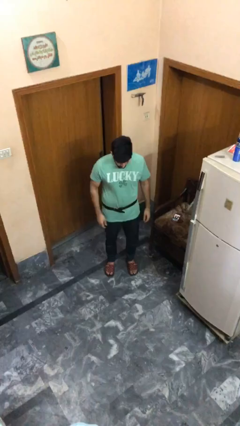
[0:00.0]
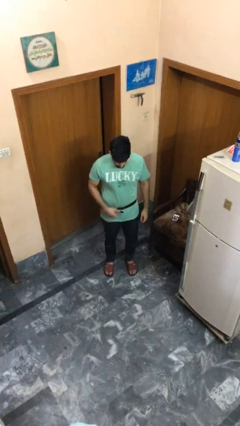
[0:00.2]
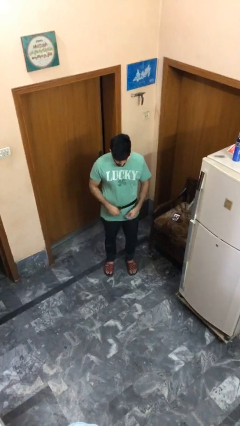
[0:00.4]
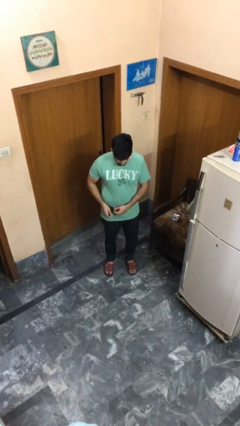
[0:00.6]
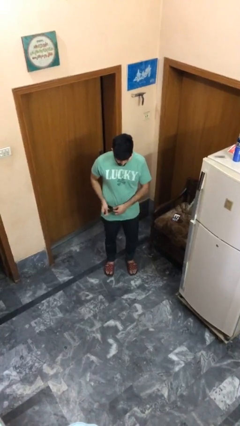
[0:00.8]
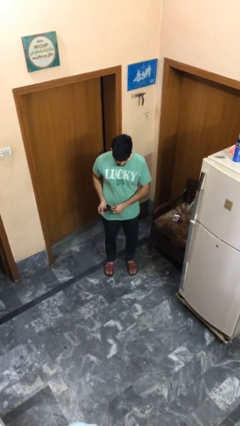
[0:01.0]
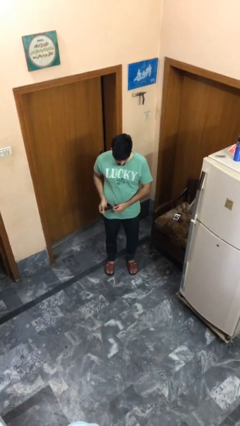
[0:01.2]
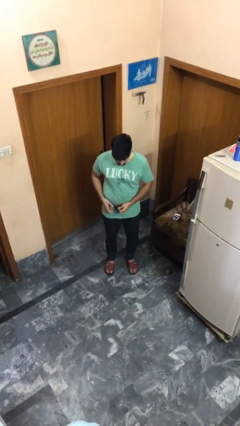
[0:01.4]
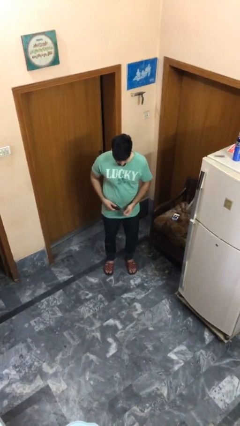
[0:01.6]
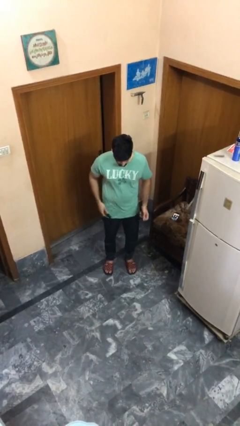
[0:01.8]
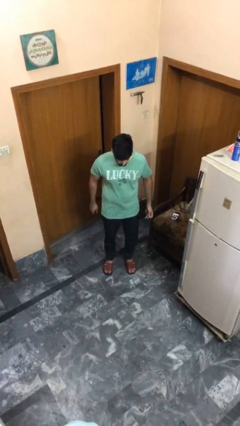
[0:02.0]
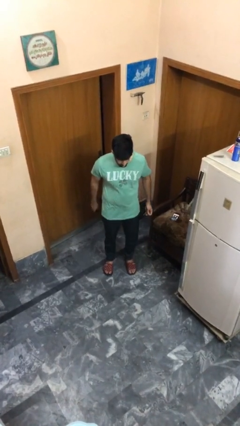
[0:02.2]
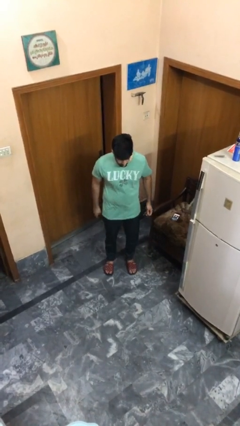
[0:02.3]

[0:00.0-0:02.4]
person takes off belt

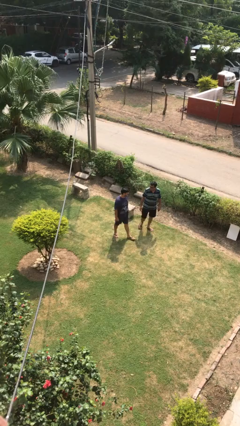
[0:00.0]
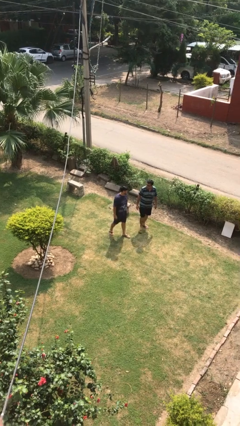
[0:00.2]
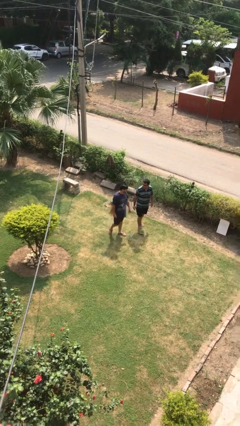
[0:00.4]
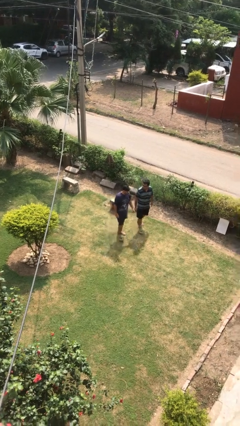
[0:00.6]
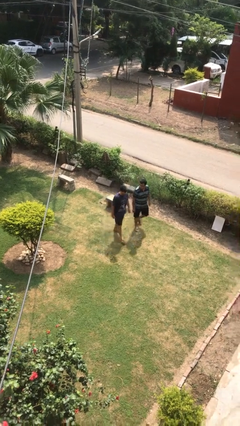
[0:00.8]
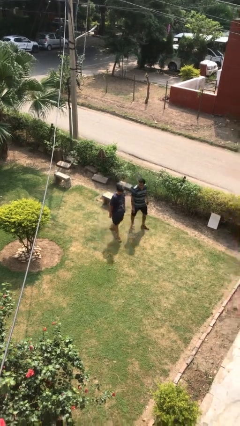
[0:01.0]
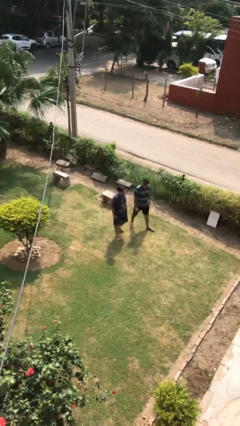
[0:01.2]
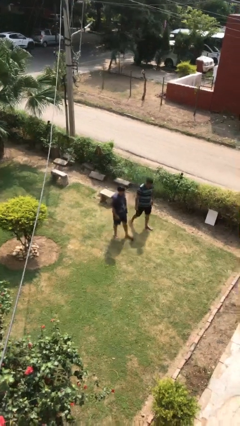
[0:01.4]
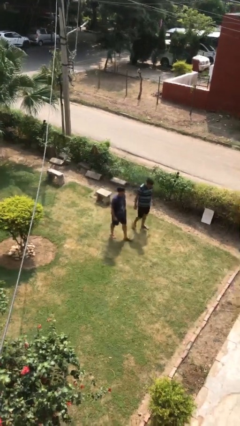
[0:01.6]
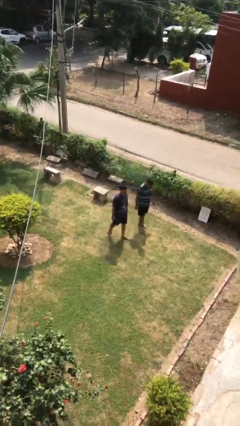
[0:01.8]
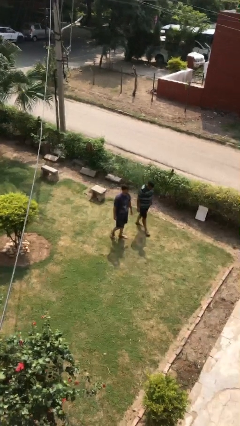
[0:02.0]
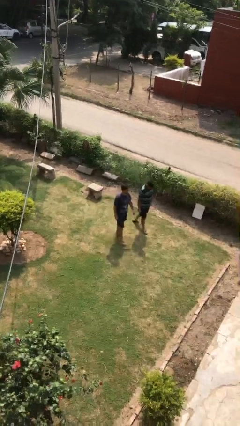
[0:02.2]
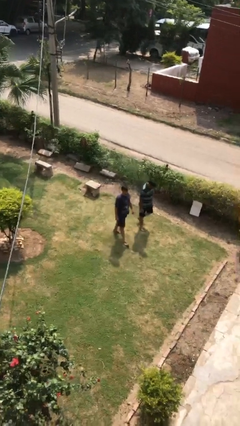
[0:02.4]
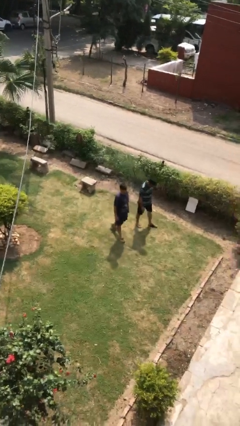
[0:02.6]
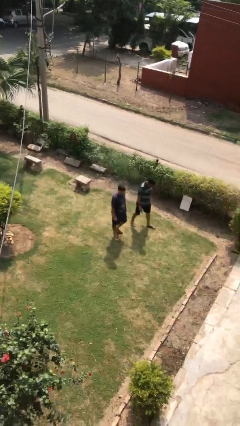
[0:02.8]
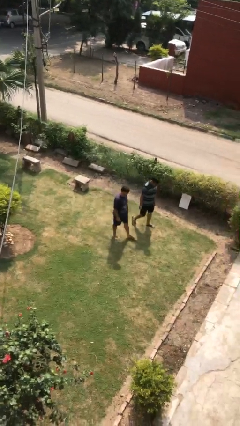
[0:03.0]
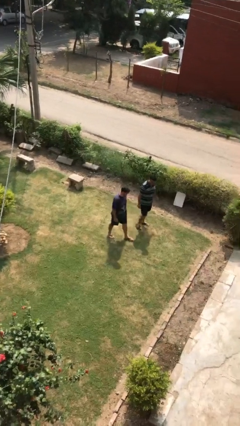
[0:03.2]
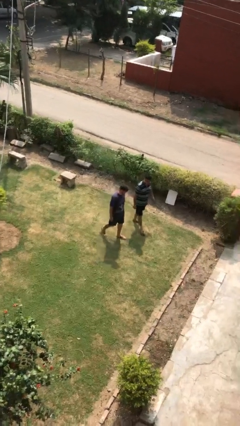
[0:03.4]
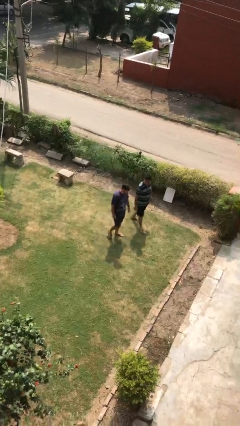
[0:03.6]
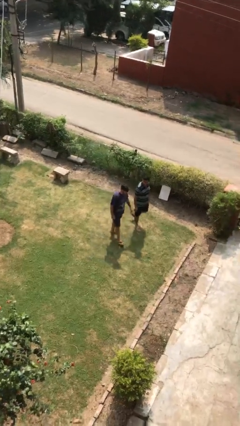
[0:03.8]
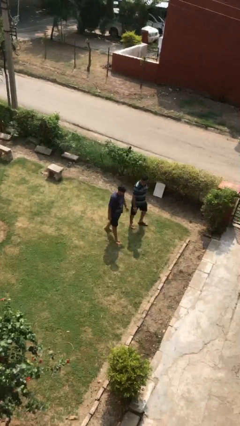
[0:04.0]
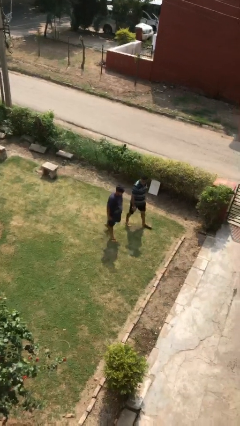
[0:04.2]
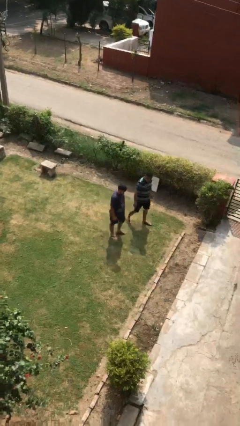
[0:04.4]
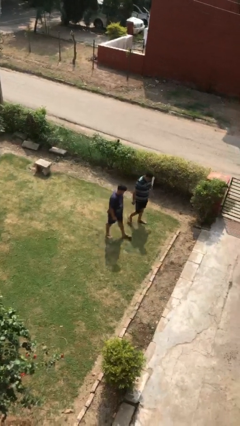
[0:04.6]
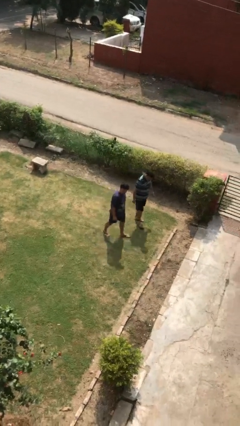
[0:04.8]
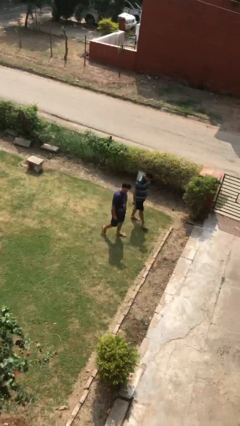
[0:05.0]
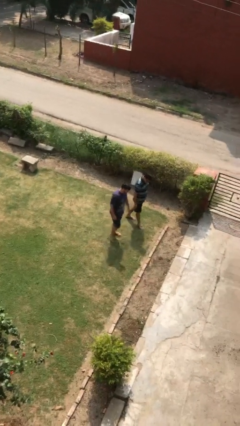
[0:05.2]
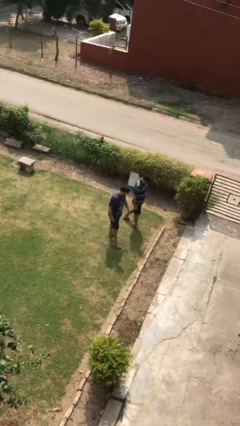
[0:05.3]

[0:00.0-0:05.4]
person talks to person

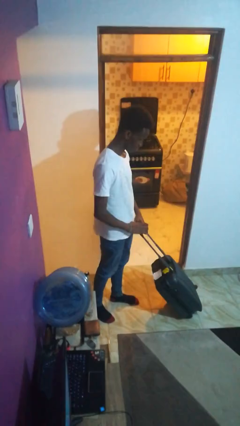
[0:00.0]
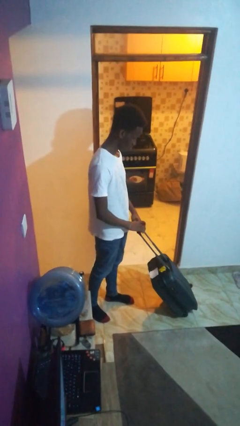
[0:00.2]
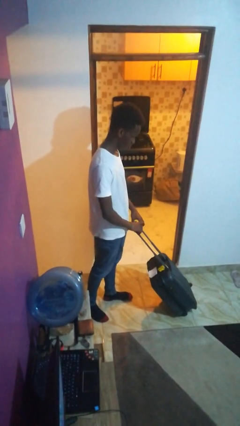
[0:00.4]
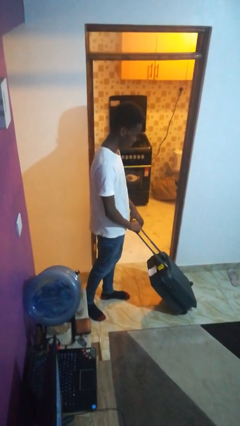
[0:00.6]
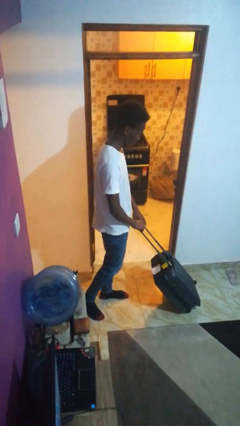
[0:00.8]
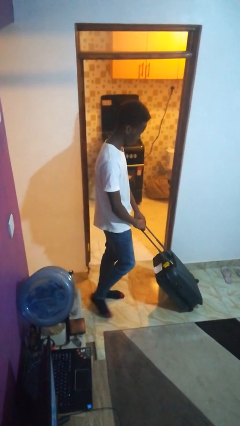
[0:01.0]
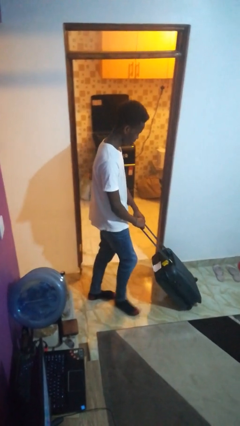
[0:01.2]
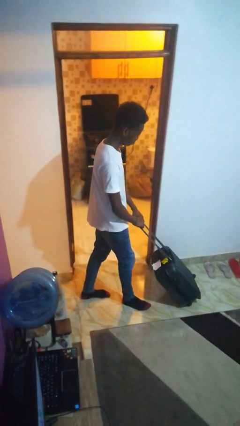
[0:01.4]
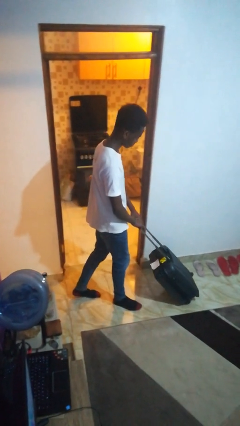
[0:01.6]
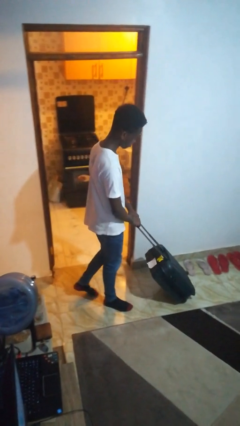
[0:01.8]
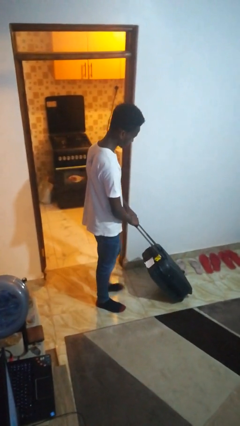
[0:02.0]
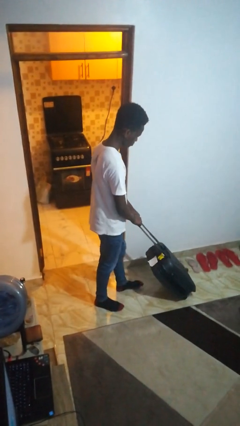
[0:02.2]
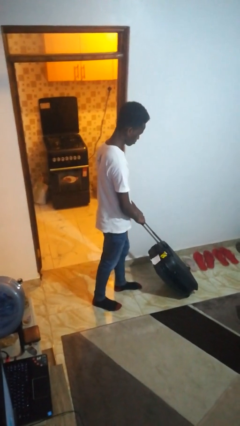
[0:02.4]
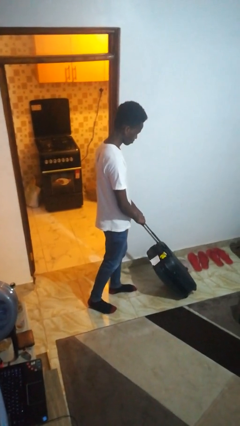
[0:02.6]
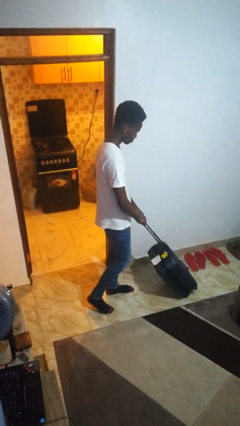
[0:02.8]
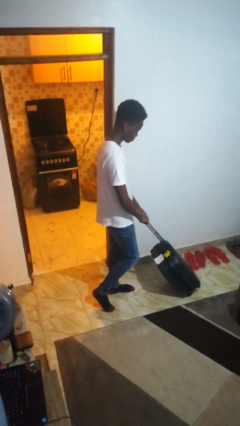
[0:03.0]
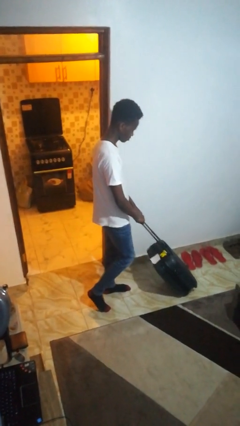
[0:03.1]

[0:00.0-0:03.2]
person pushes wheeled cart

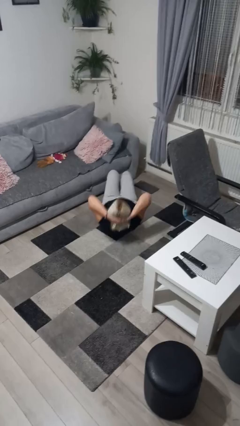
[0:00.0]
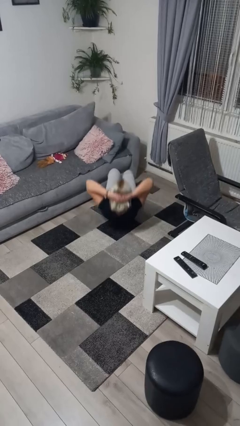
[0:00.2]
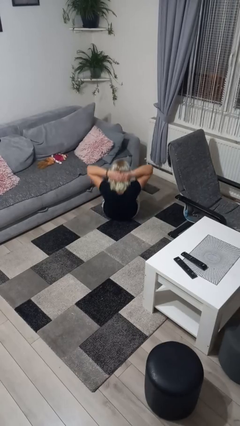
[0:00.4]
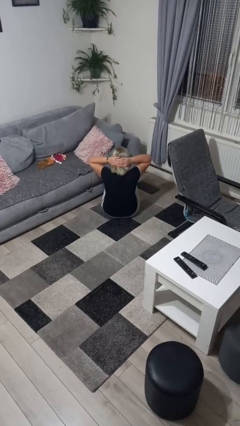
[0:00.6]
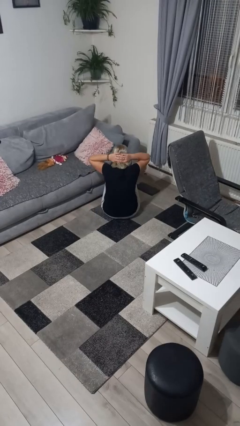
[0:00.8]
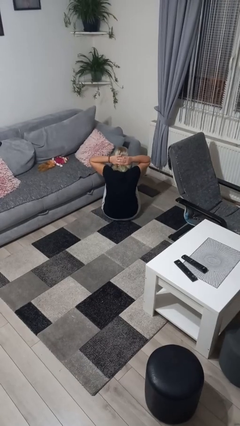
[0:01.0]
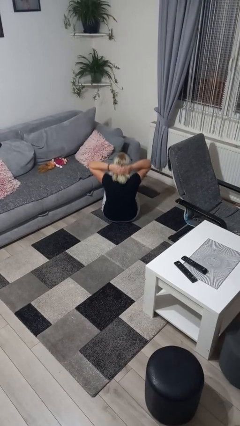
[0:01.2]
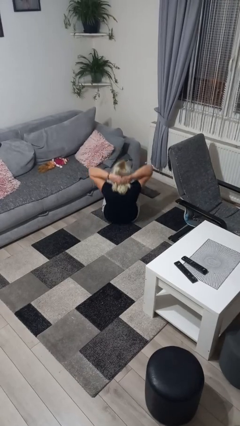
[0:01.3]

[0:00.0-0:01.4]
person exercises with situp

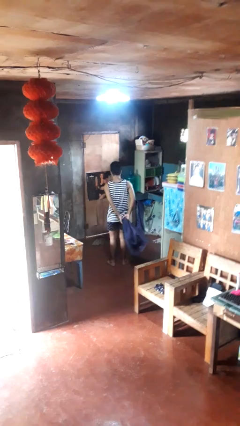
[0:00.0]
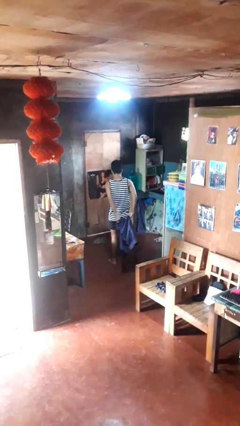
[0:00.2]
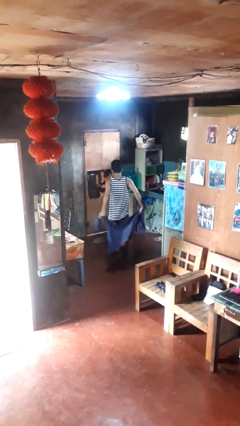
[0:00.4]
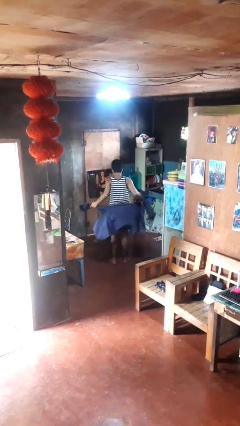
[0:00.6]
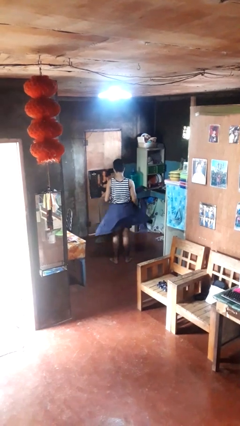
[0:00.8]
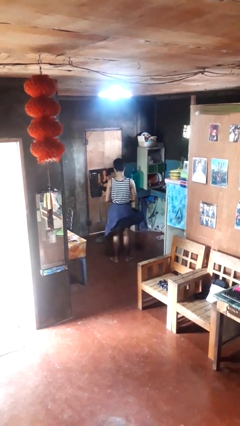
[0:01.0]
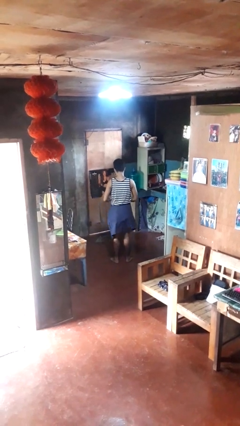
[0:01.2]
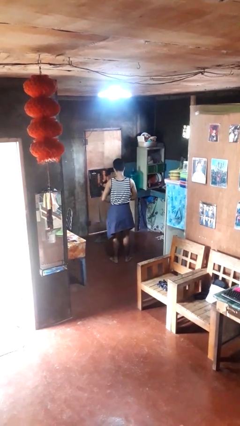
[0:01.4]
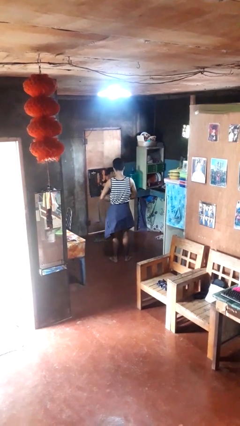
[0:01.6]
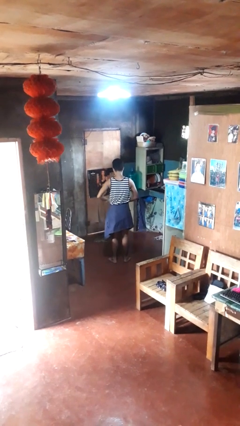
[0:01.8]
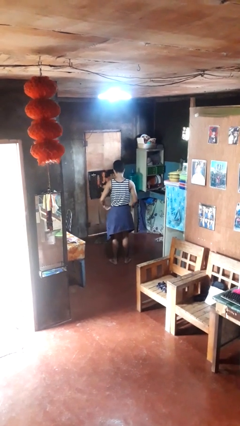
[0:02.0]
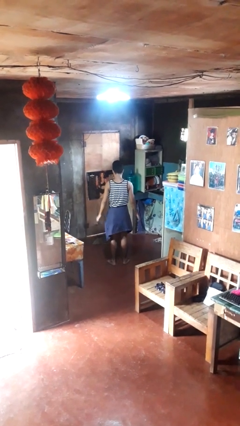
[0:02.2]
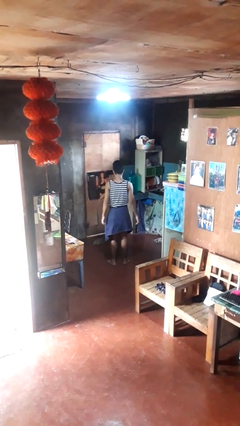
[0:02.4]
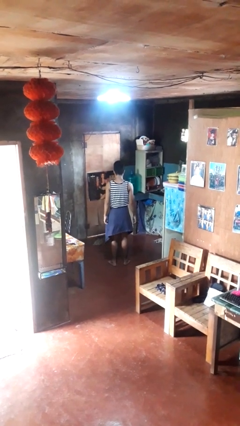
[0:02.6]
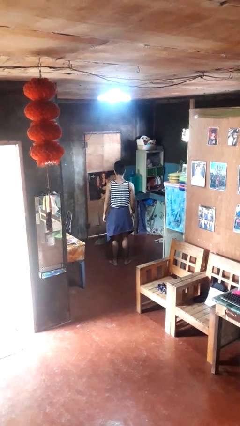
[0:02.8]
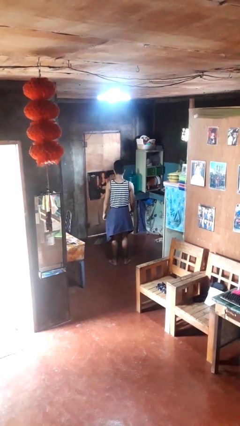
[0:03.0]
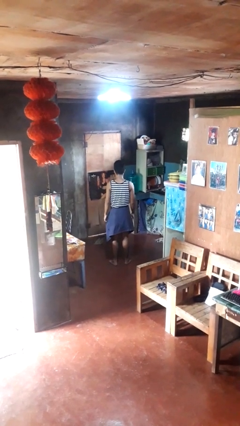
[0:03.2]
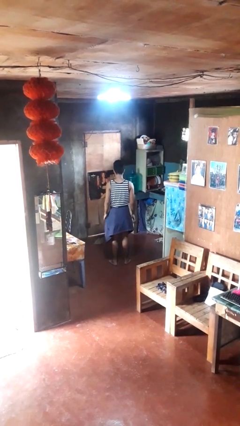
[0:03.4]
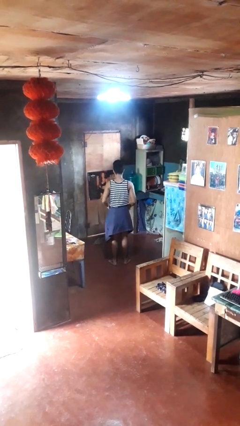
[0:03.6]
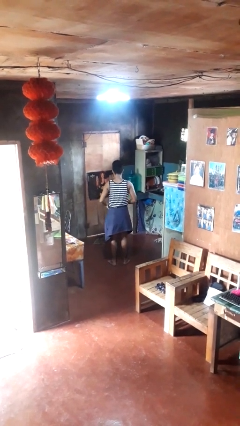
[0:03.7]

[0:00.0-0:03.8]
person ties jacket around waist

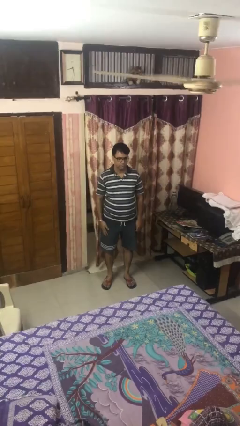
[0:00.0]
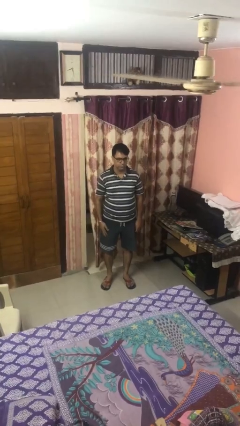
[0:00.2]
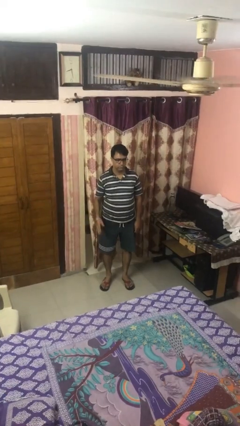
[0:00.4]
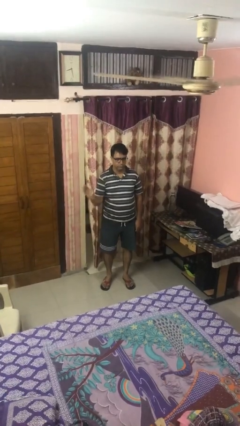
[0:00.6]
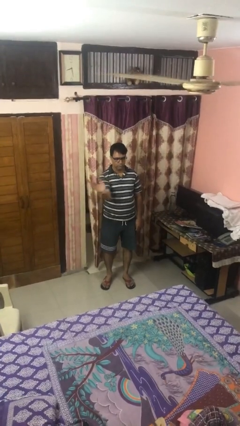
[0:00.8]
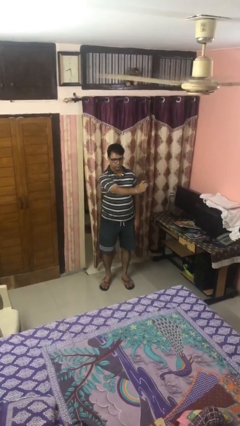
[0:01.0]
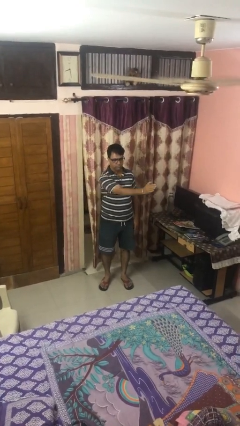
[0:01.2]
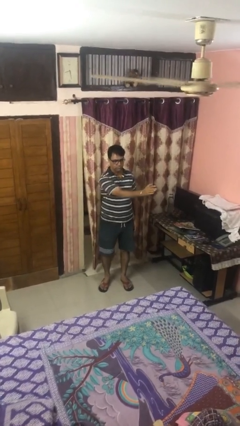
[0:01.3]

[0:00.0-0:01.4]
person gestures swipe left
